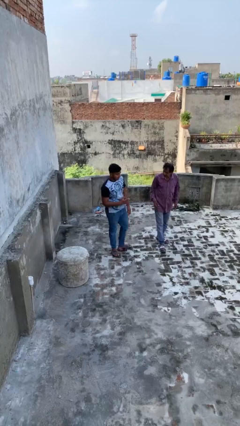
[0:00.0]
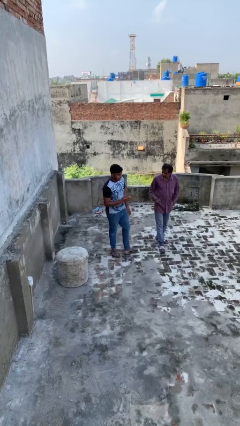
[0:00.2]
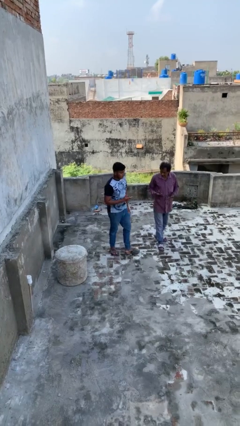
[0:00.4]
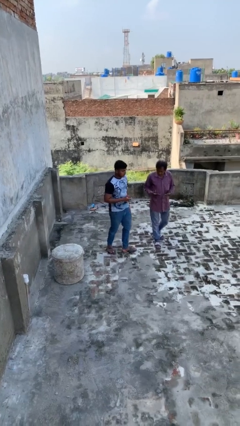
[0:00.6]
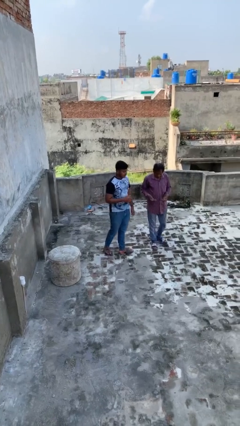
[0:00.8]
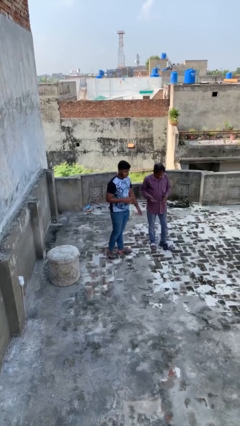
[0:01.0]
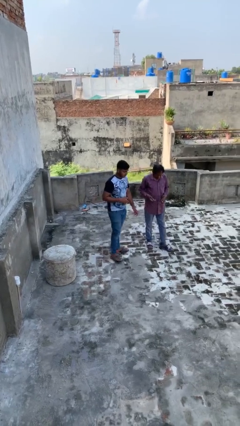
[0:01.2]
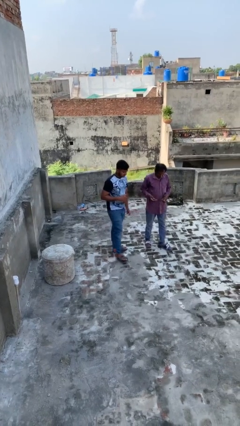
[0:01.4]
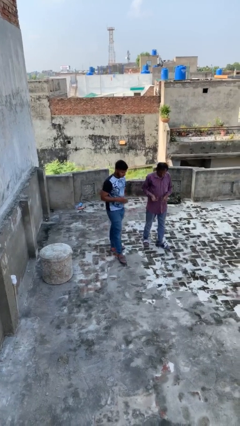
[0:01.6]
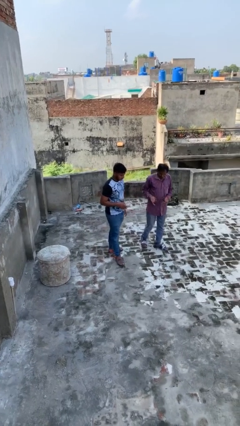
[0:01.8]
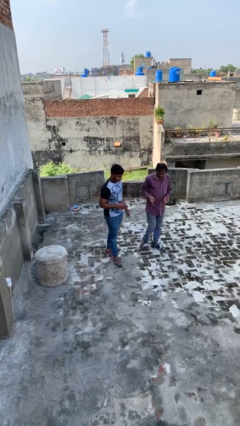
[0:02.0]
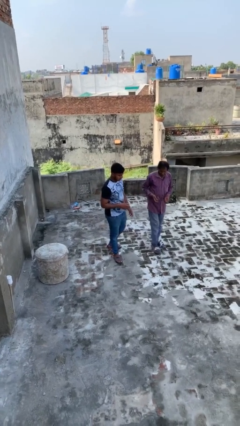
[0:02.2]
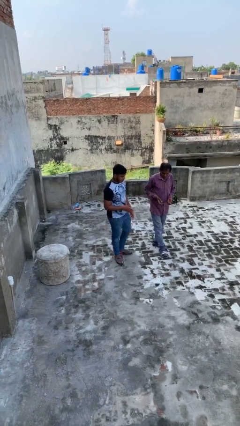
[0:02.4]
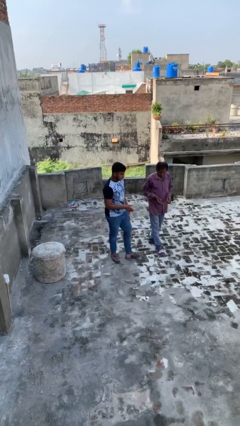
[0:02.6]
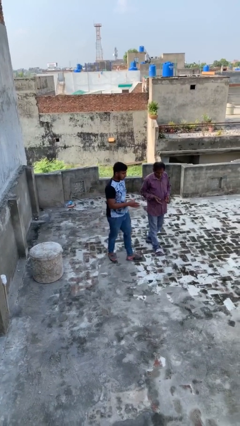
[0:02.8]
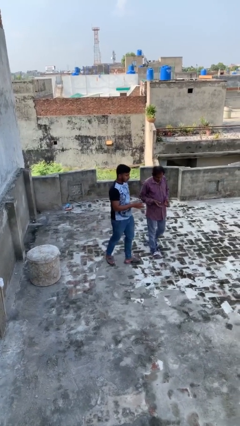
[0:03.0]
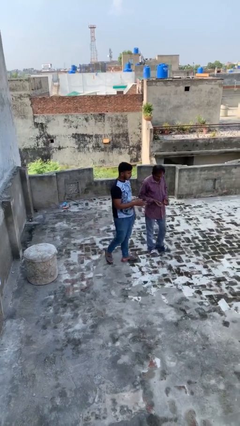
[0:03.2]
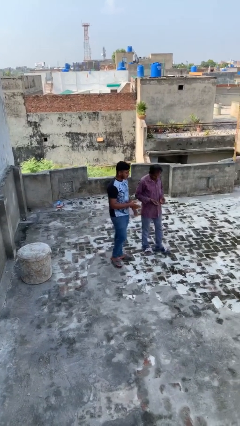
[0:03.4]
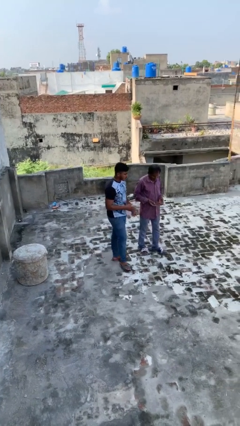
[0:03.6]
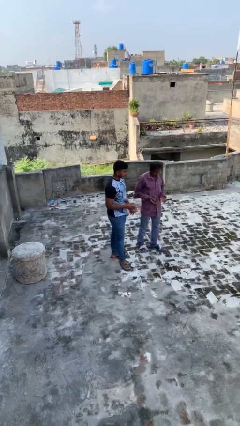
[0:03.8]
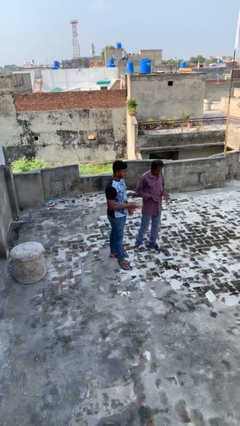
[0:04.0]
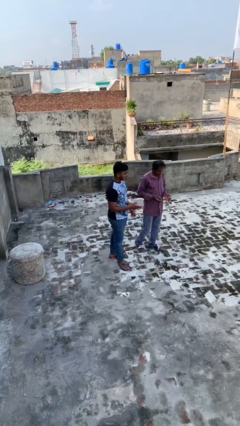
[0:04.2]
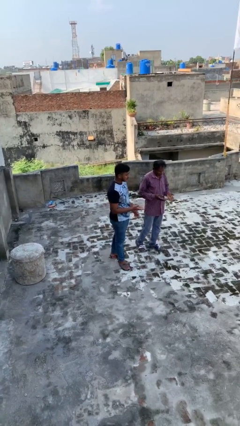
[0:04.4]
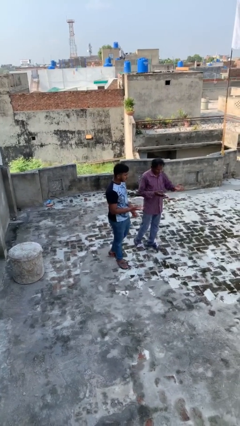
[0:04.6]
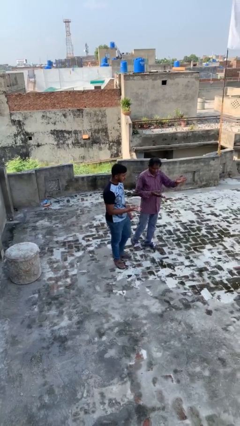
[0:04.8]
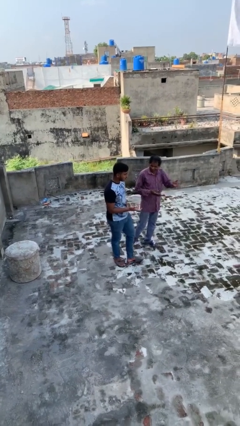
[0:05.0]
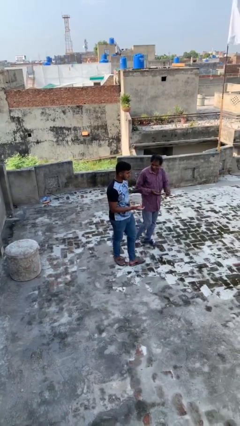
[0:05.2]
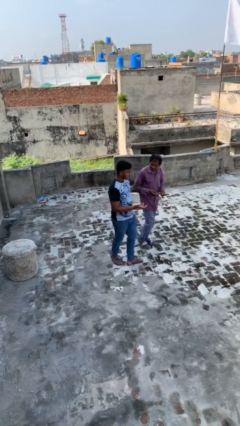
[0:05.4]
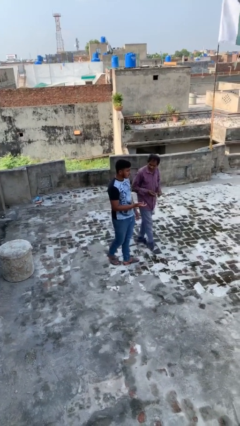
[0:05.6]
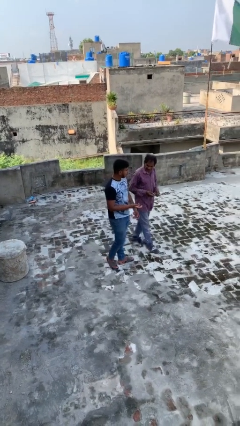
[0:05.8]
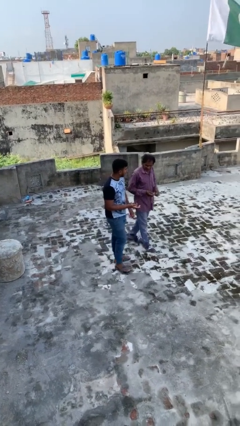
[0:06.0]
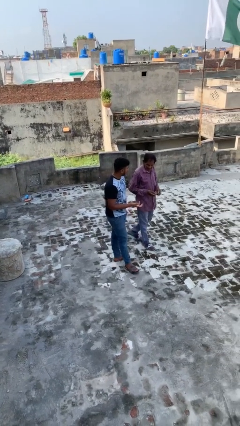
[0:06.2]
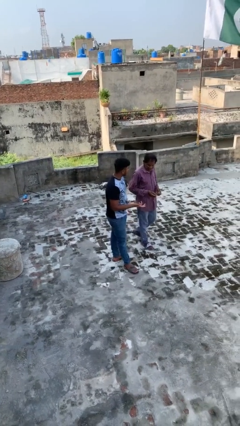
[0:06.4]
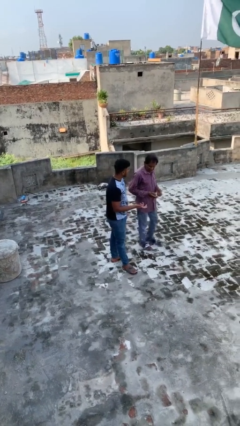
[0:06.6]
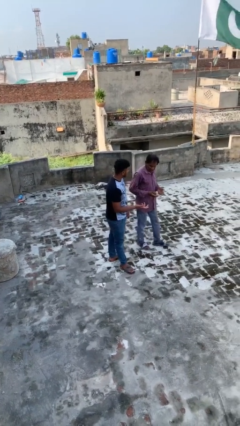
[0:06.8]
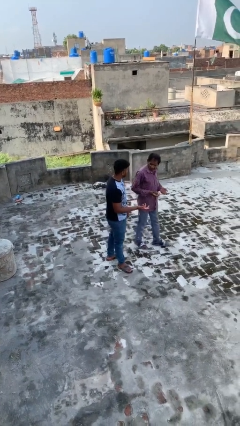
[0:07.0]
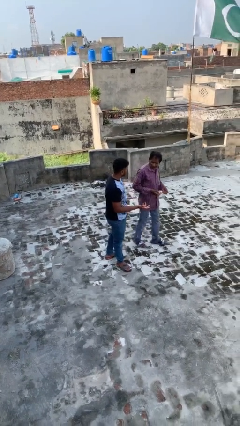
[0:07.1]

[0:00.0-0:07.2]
person talks to person

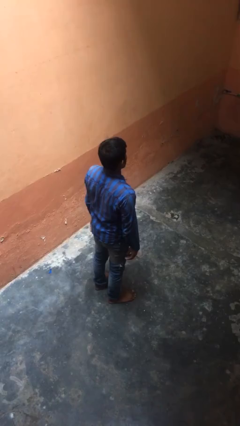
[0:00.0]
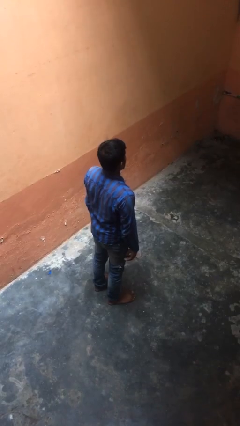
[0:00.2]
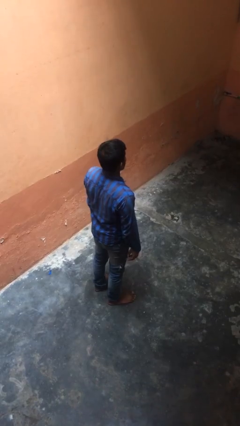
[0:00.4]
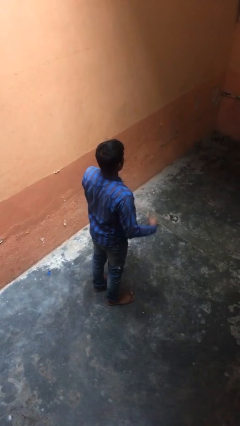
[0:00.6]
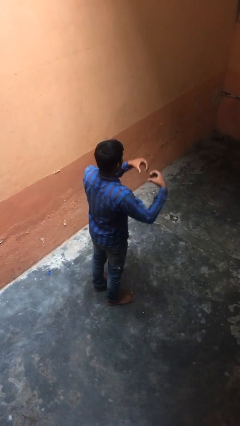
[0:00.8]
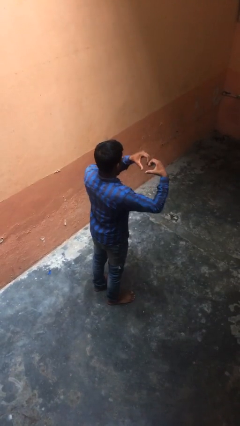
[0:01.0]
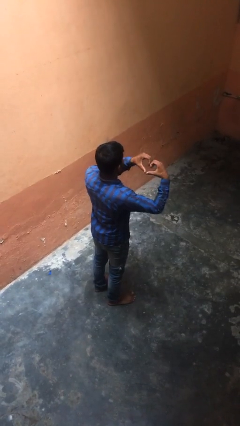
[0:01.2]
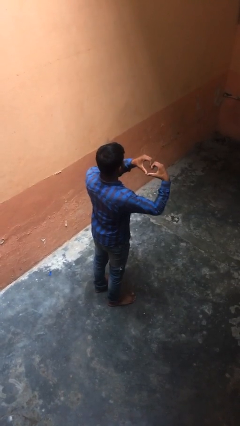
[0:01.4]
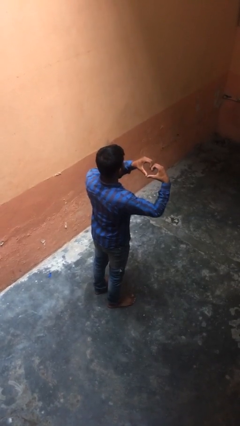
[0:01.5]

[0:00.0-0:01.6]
person gestures heart

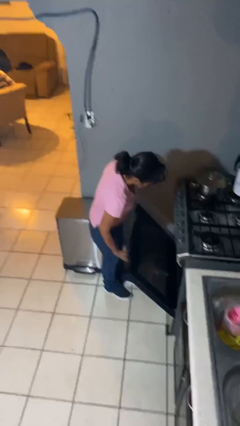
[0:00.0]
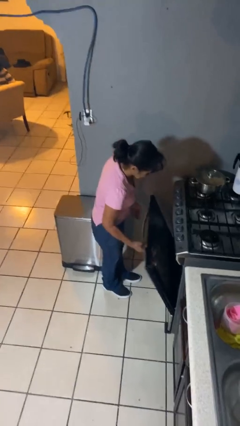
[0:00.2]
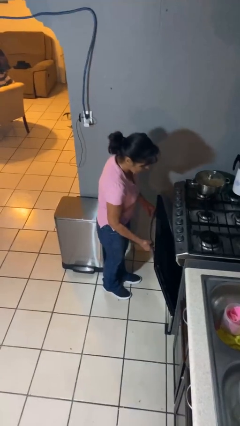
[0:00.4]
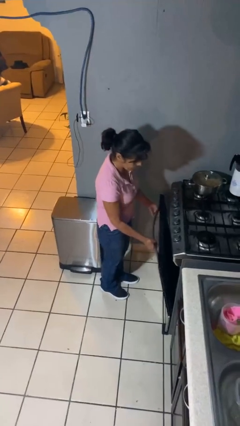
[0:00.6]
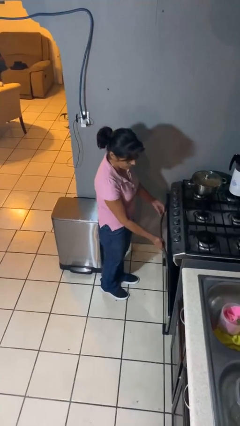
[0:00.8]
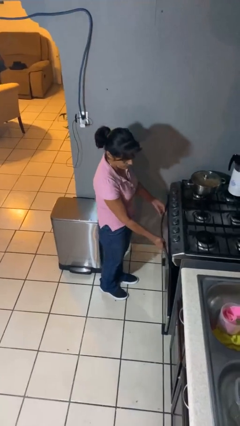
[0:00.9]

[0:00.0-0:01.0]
person closes oven door

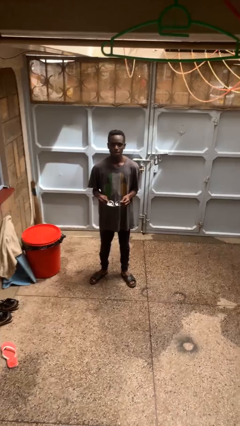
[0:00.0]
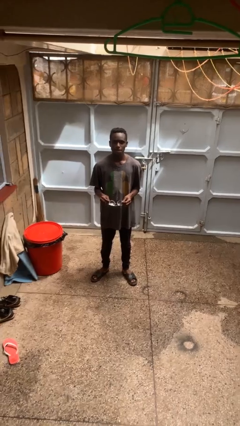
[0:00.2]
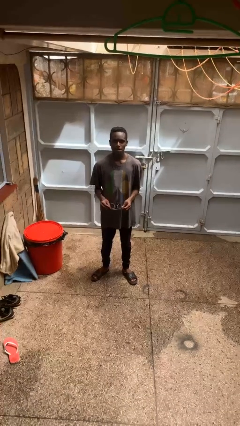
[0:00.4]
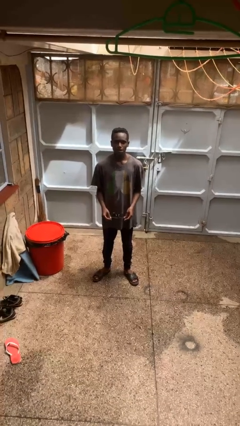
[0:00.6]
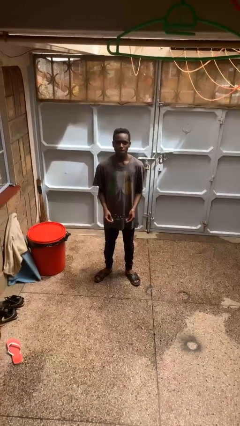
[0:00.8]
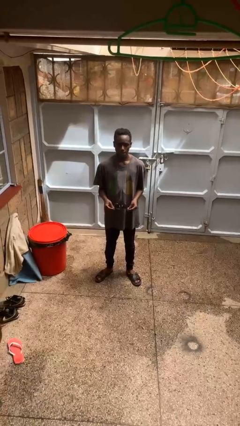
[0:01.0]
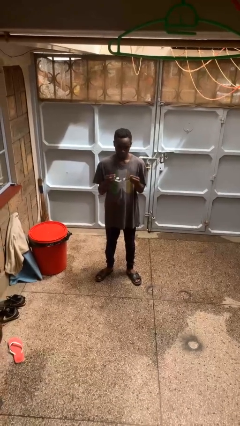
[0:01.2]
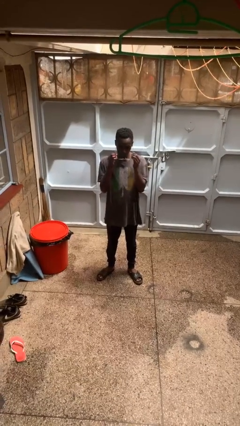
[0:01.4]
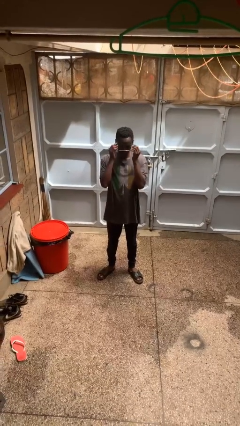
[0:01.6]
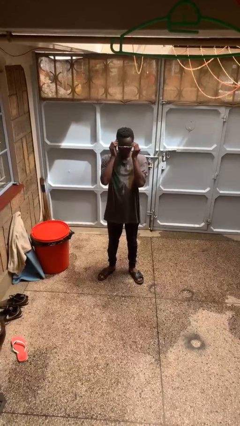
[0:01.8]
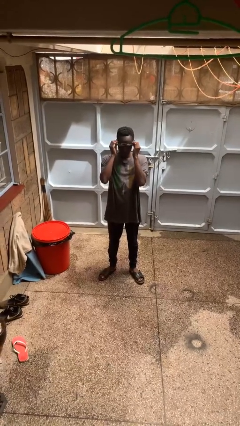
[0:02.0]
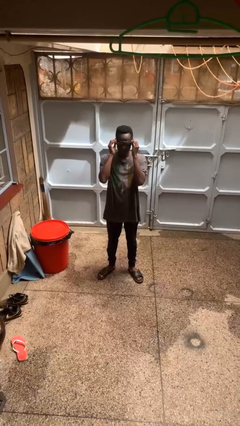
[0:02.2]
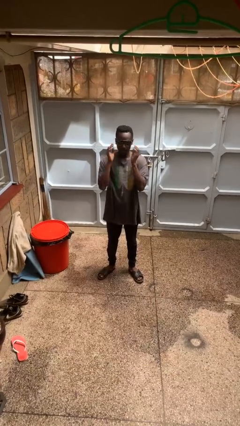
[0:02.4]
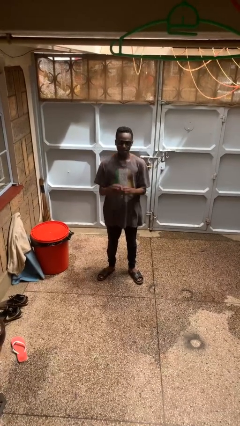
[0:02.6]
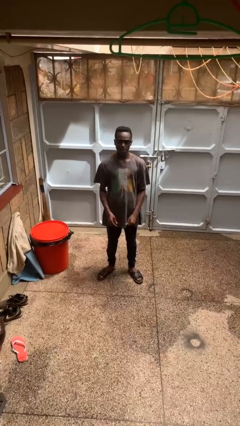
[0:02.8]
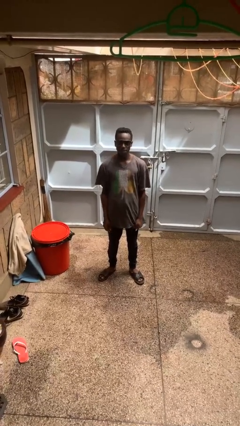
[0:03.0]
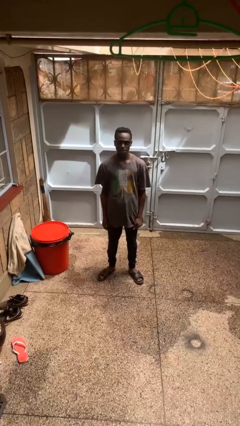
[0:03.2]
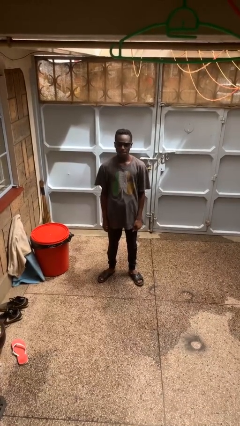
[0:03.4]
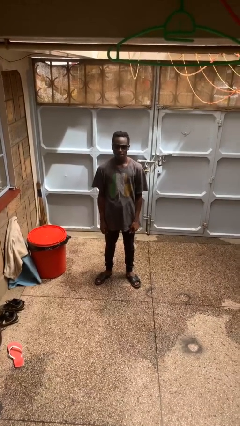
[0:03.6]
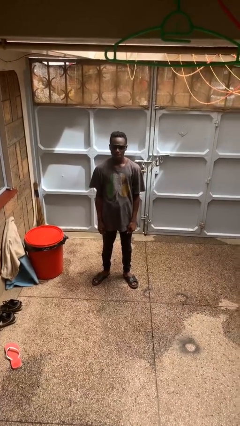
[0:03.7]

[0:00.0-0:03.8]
person puts on sunglasses

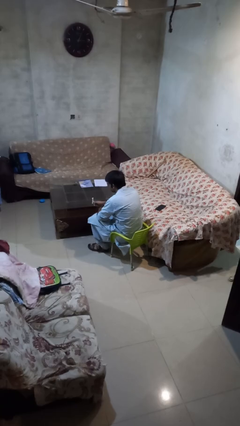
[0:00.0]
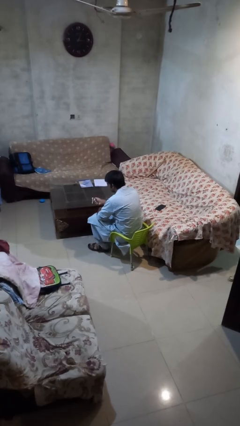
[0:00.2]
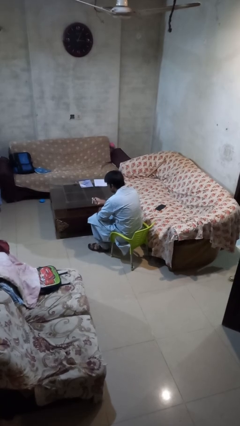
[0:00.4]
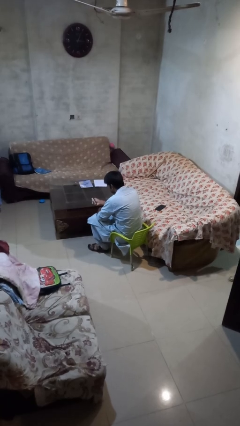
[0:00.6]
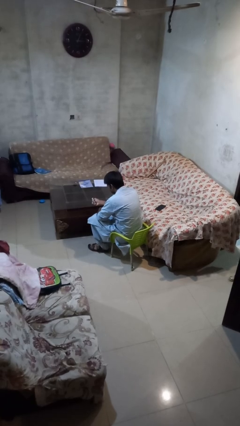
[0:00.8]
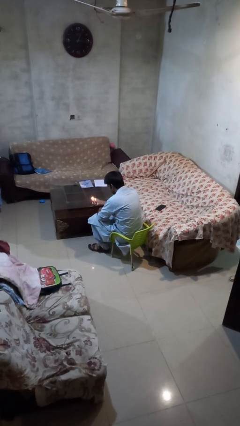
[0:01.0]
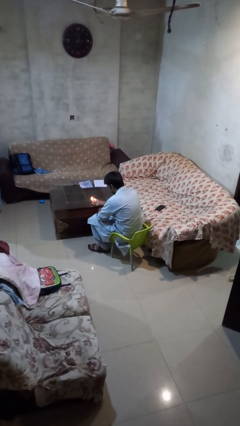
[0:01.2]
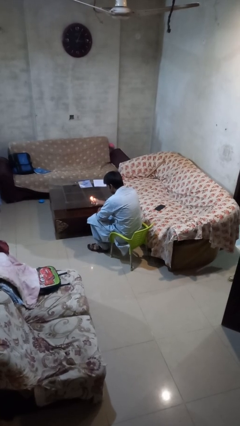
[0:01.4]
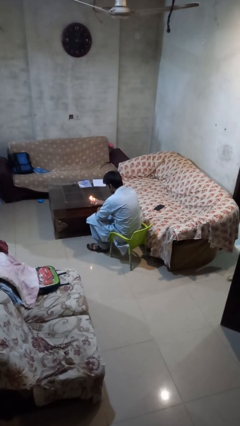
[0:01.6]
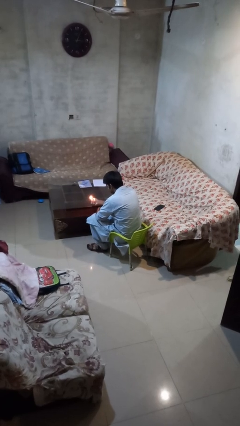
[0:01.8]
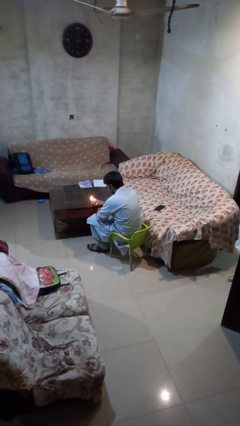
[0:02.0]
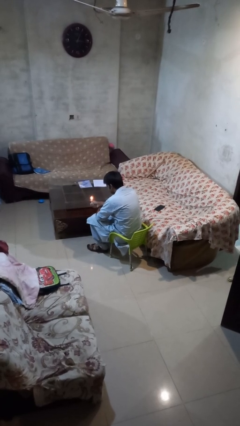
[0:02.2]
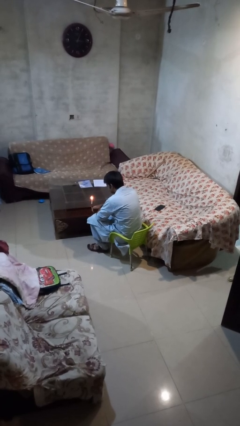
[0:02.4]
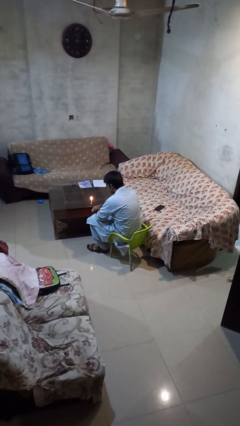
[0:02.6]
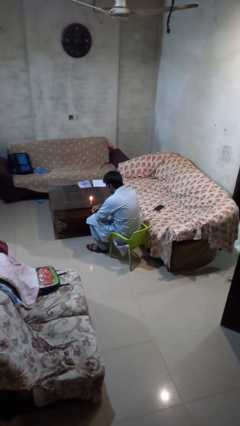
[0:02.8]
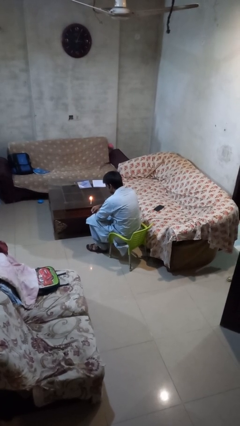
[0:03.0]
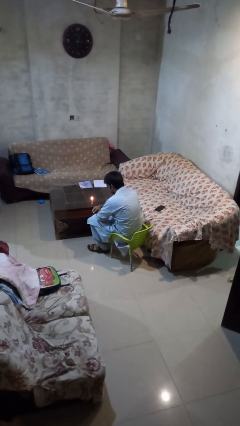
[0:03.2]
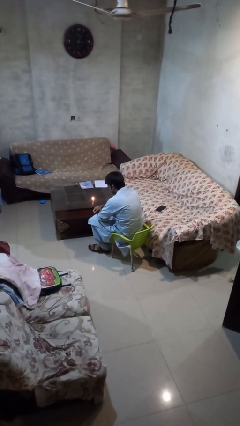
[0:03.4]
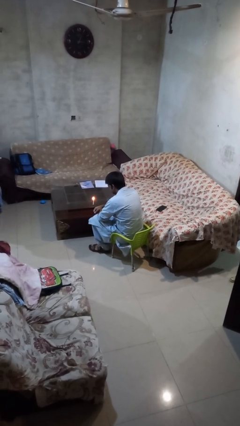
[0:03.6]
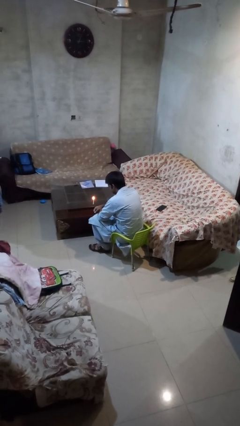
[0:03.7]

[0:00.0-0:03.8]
person lights candle

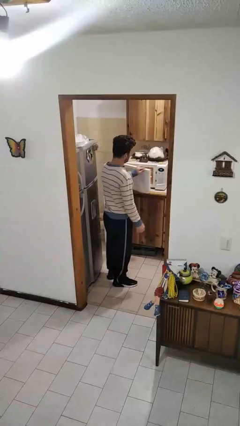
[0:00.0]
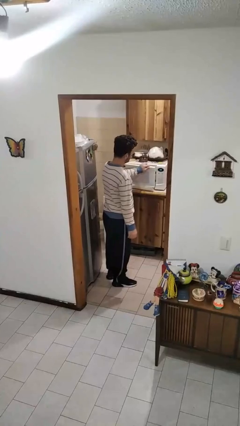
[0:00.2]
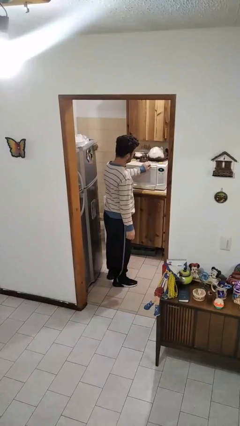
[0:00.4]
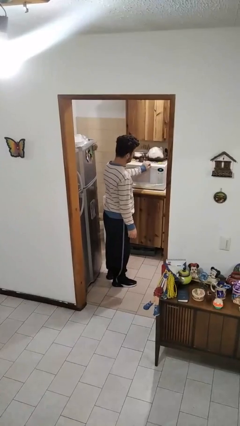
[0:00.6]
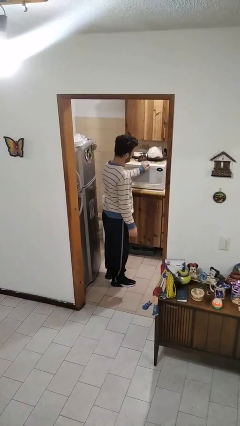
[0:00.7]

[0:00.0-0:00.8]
person closes microwave
